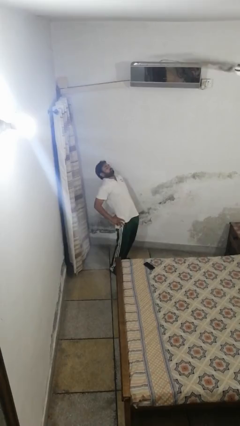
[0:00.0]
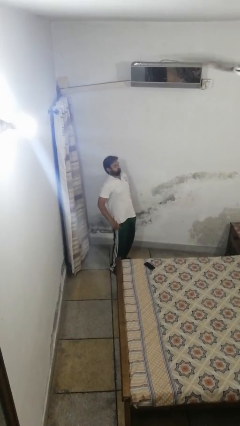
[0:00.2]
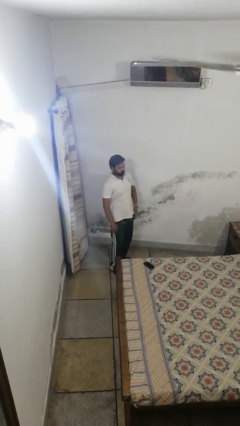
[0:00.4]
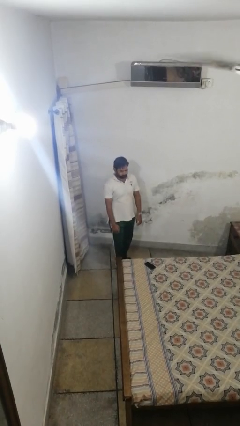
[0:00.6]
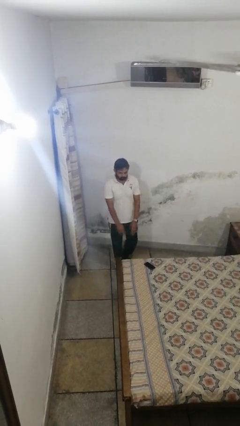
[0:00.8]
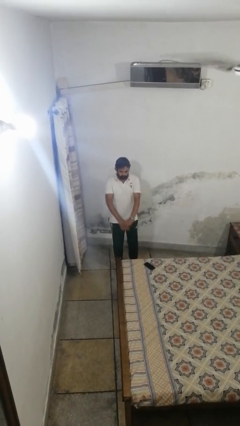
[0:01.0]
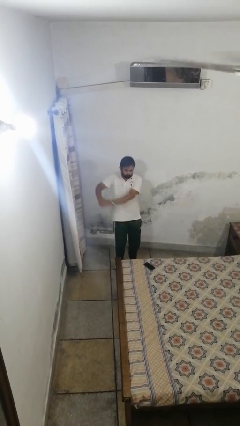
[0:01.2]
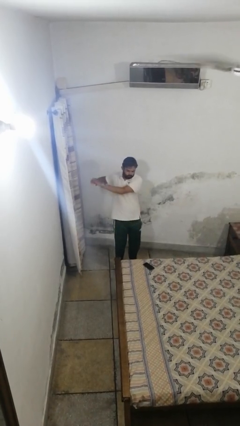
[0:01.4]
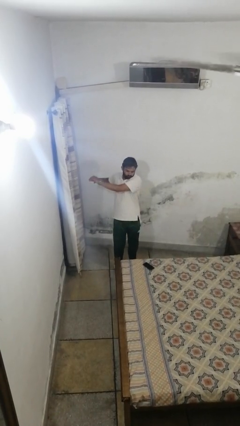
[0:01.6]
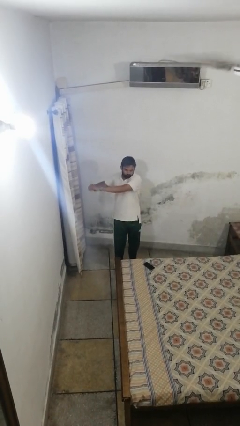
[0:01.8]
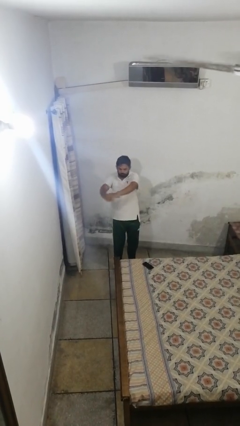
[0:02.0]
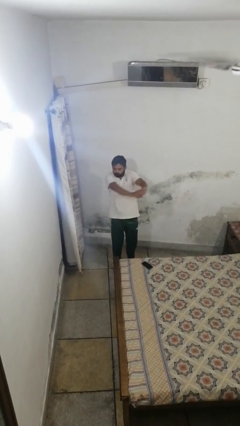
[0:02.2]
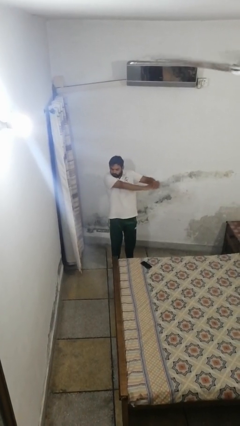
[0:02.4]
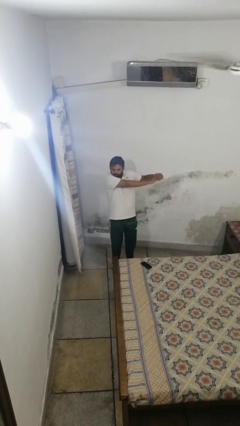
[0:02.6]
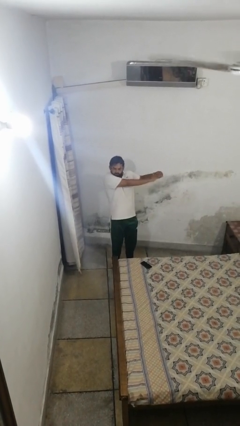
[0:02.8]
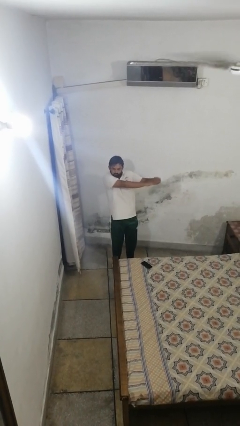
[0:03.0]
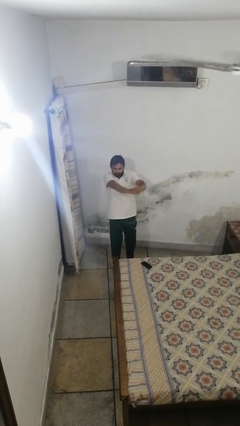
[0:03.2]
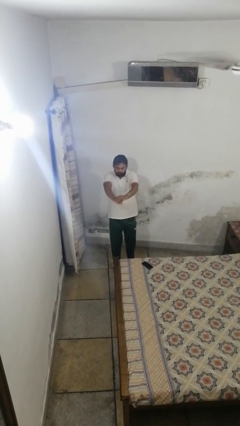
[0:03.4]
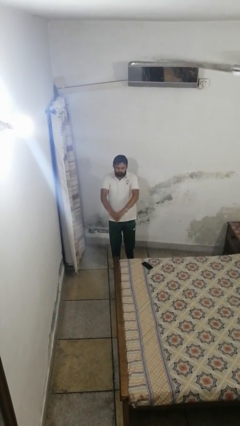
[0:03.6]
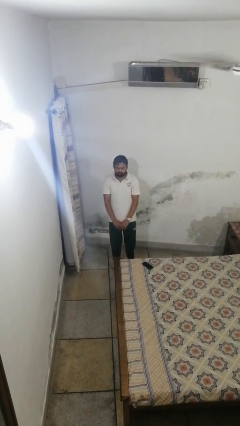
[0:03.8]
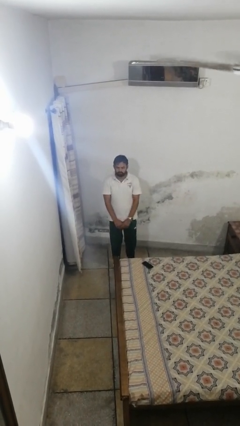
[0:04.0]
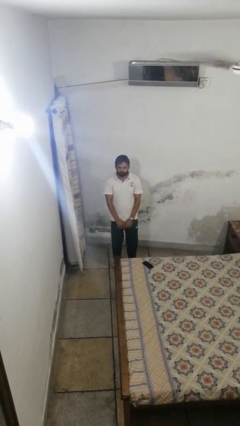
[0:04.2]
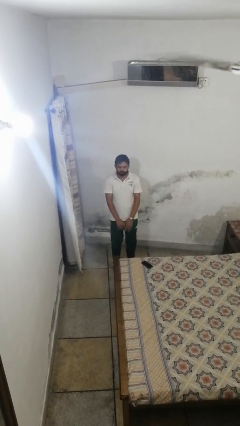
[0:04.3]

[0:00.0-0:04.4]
person stretches arms to side

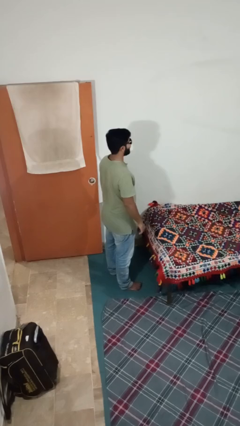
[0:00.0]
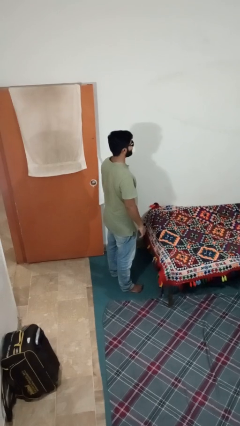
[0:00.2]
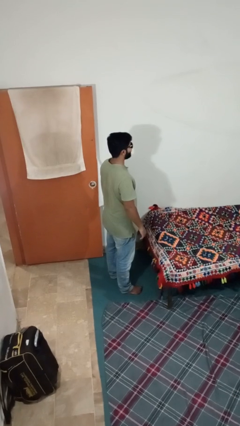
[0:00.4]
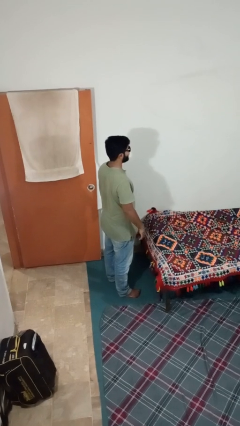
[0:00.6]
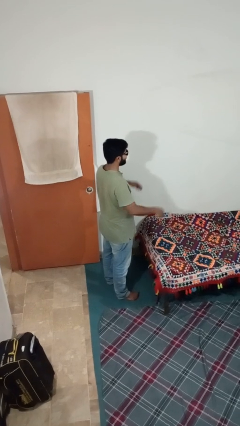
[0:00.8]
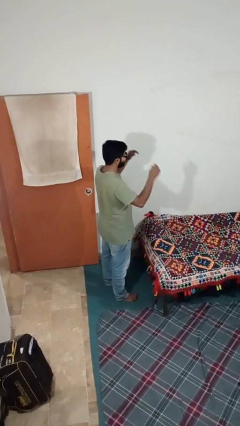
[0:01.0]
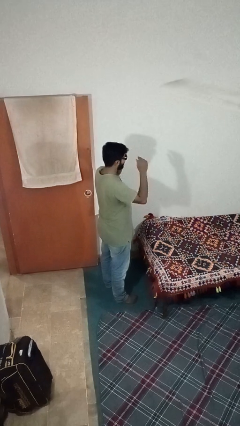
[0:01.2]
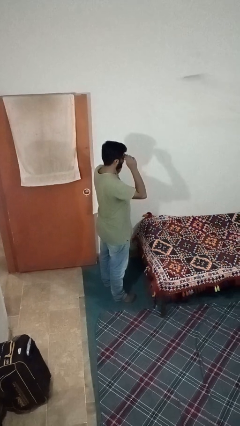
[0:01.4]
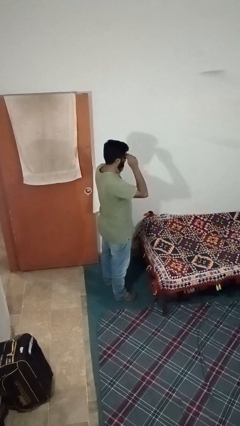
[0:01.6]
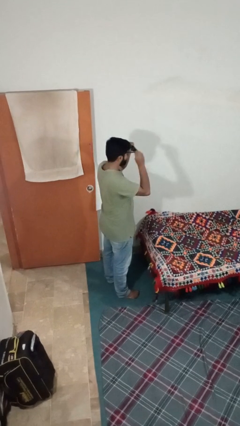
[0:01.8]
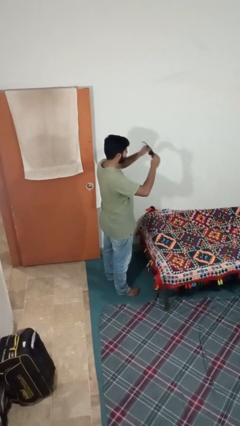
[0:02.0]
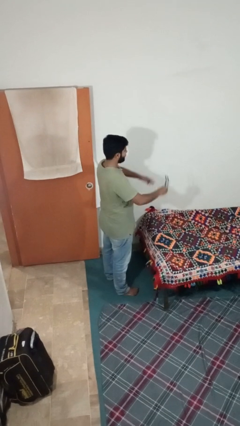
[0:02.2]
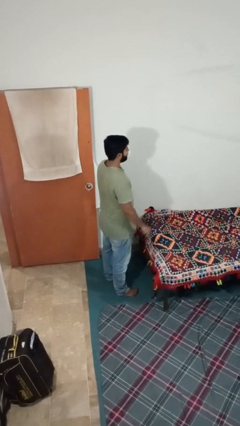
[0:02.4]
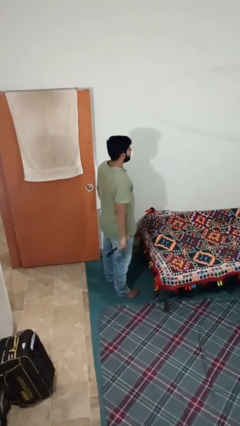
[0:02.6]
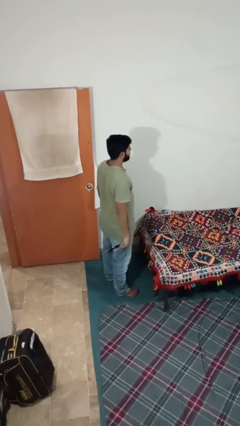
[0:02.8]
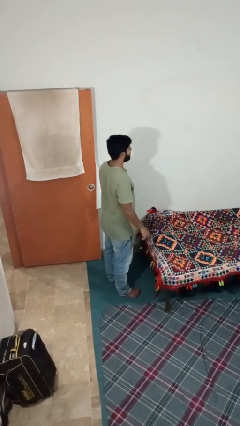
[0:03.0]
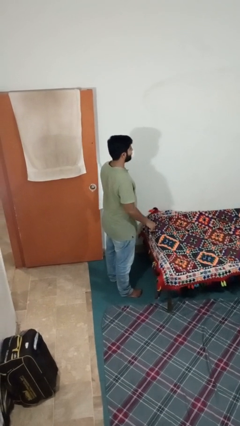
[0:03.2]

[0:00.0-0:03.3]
person takes off sunglasses

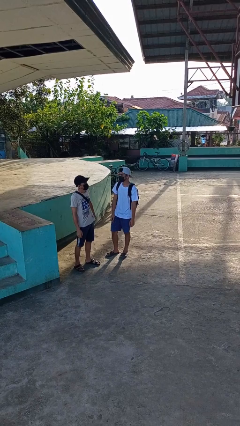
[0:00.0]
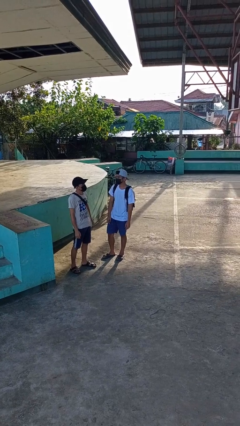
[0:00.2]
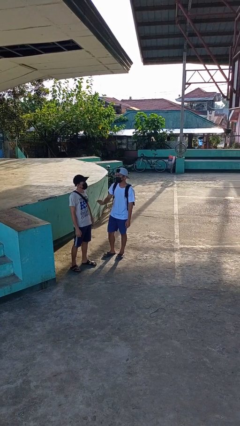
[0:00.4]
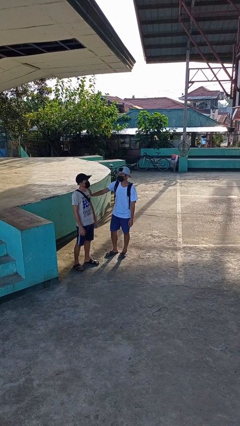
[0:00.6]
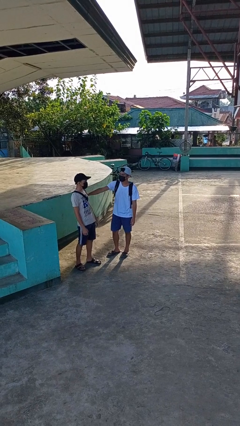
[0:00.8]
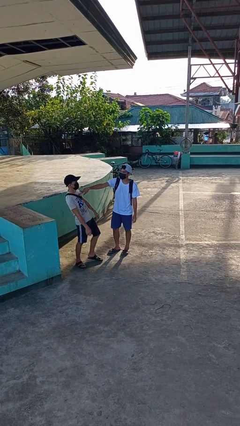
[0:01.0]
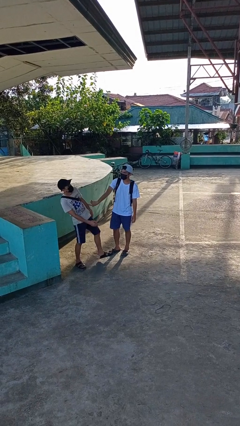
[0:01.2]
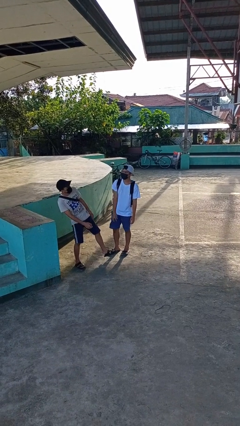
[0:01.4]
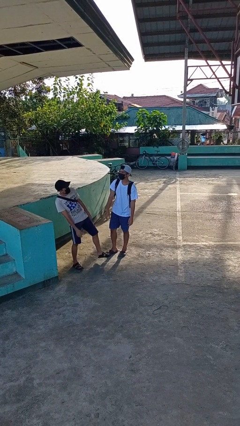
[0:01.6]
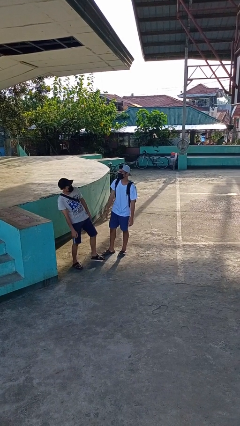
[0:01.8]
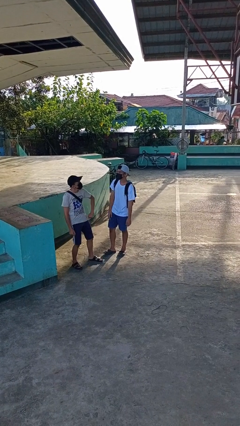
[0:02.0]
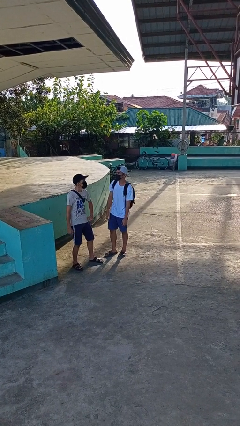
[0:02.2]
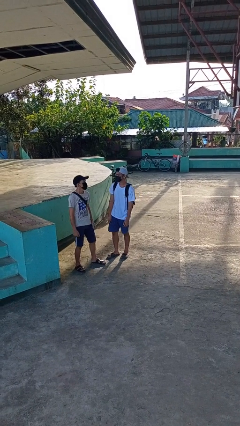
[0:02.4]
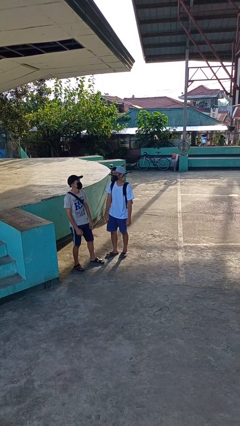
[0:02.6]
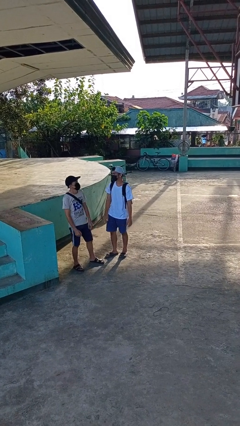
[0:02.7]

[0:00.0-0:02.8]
person shoves person

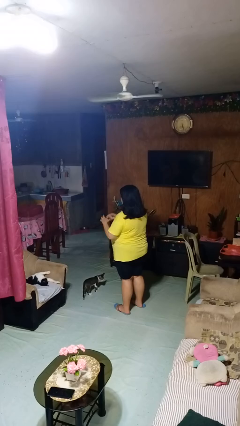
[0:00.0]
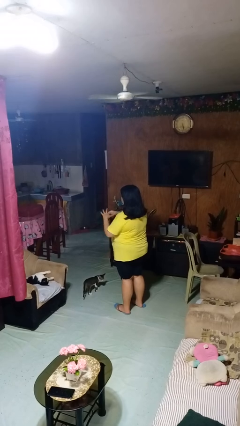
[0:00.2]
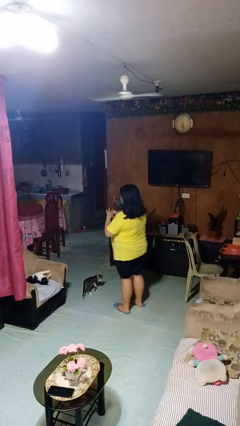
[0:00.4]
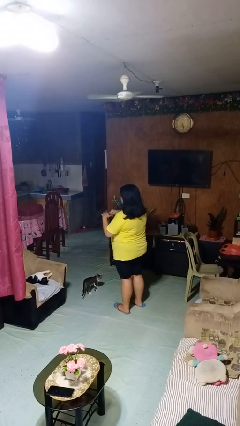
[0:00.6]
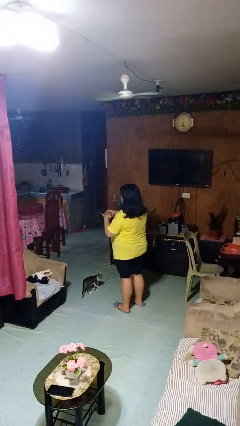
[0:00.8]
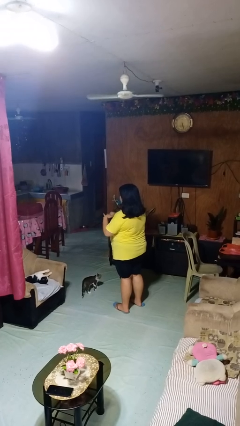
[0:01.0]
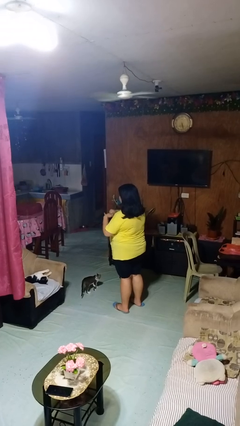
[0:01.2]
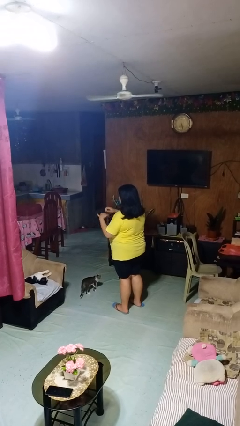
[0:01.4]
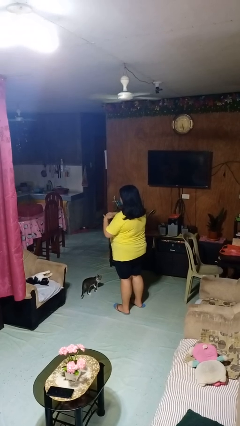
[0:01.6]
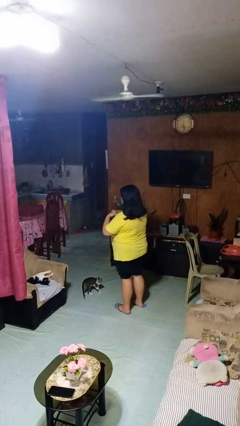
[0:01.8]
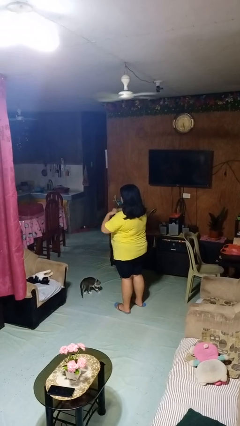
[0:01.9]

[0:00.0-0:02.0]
person cracks knuckles

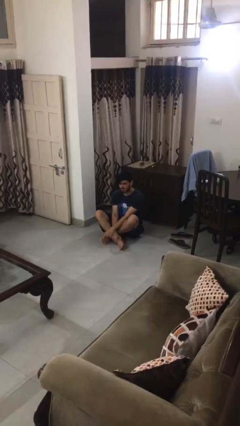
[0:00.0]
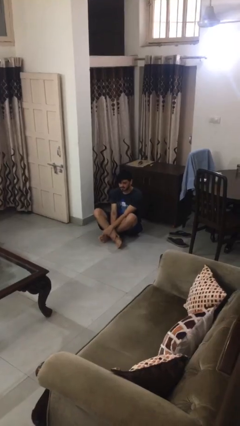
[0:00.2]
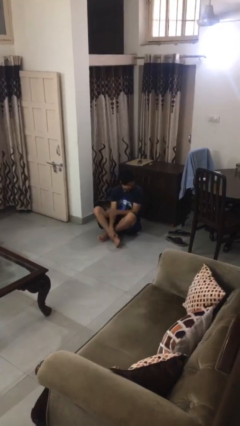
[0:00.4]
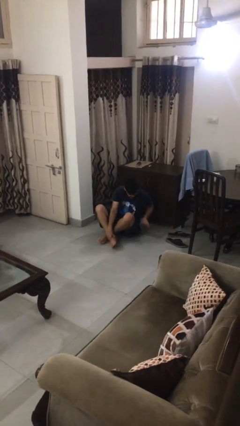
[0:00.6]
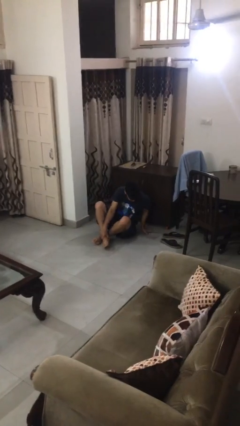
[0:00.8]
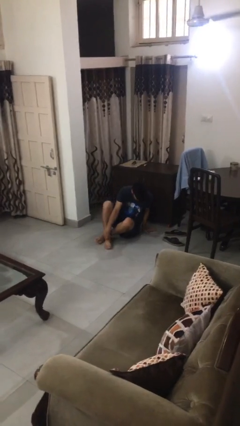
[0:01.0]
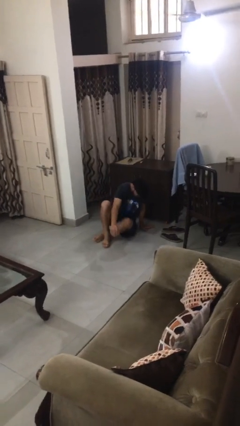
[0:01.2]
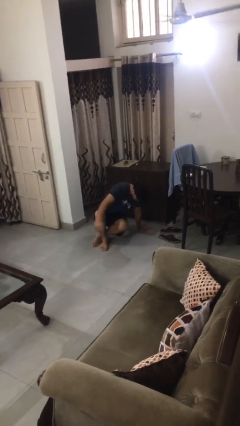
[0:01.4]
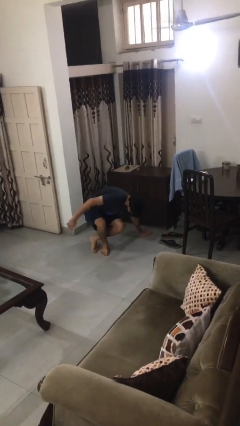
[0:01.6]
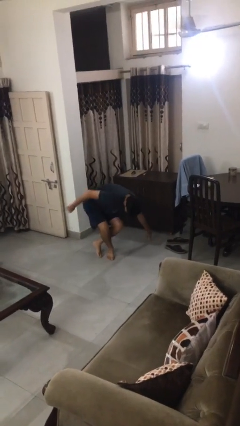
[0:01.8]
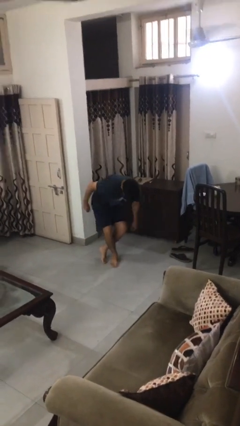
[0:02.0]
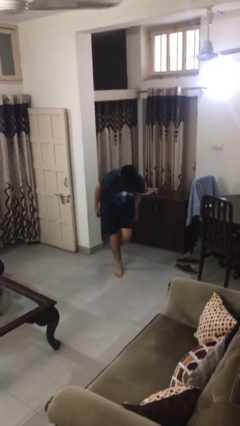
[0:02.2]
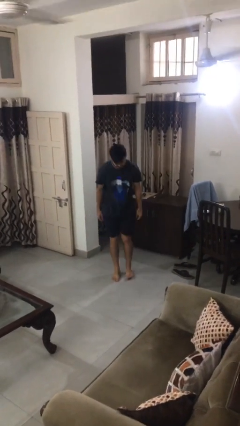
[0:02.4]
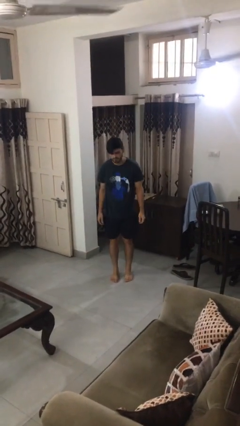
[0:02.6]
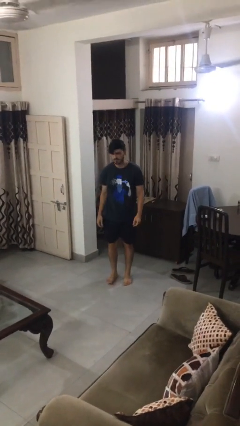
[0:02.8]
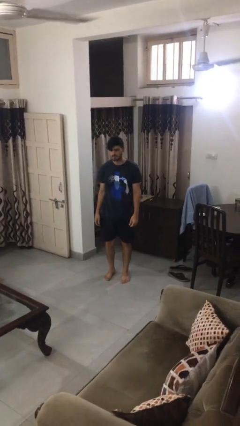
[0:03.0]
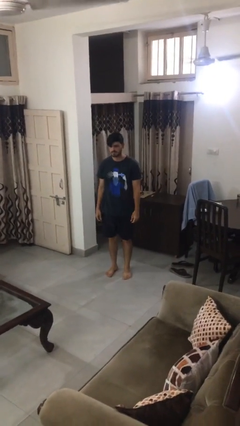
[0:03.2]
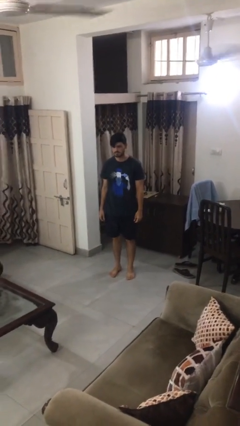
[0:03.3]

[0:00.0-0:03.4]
person stands up from floor

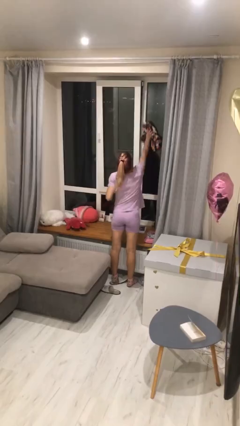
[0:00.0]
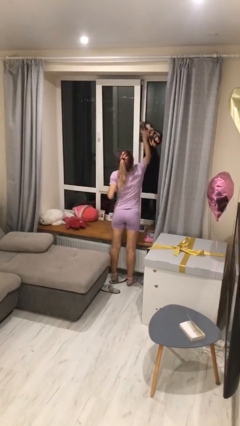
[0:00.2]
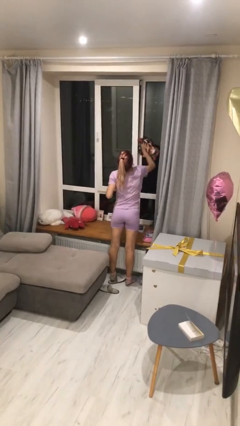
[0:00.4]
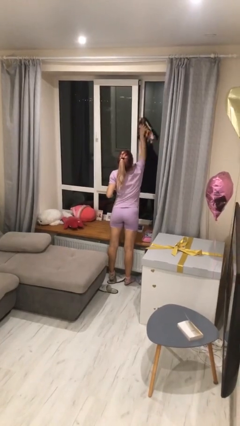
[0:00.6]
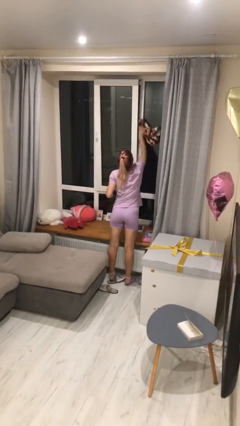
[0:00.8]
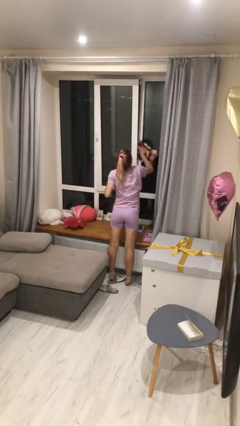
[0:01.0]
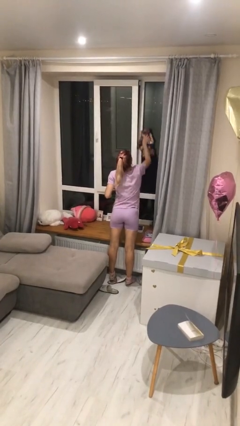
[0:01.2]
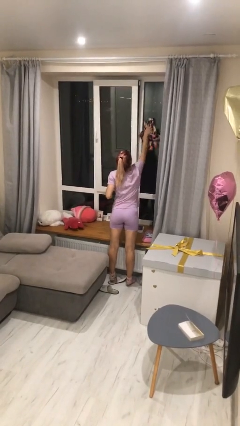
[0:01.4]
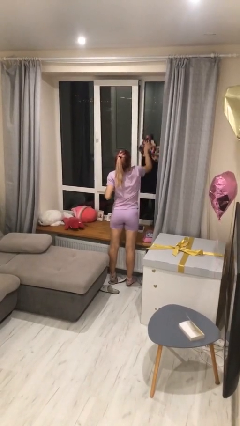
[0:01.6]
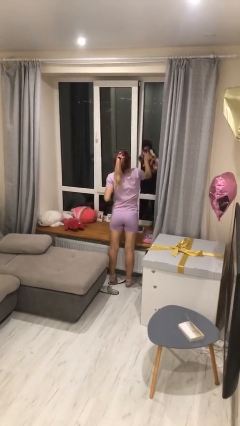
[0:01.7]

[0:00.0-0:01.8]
person washes window
